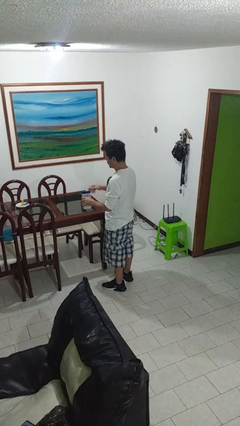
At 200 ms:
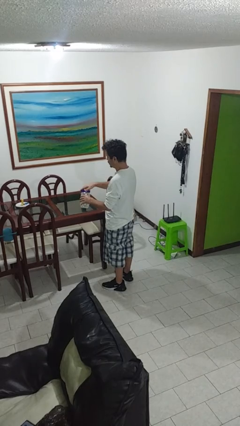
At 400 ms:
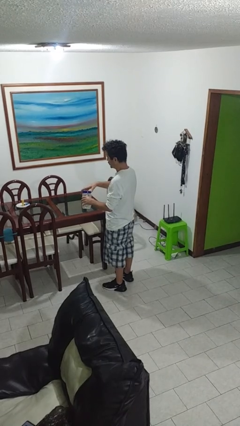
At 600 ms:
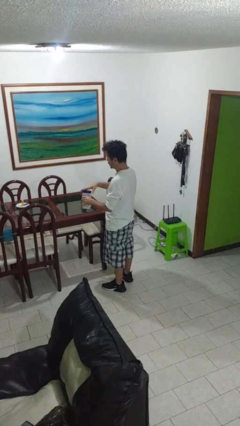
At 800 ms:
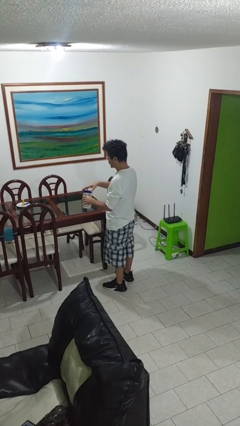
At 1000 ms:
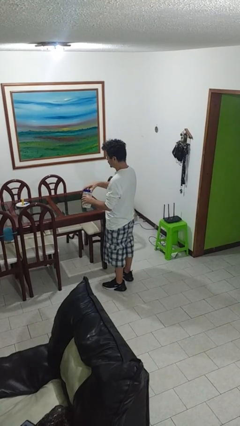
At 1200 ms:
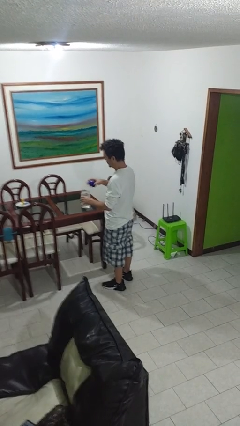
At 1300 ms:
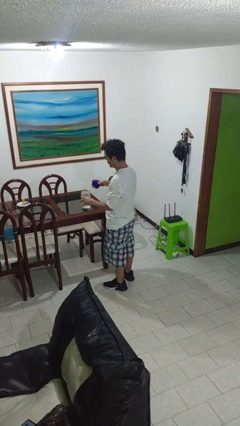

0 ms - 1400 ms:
person opens jar

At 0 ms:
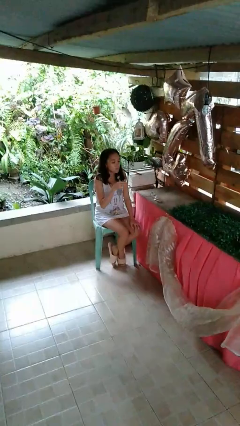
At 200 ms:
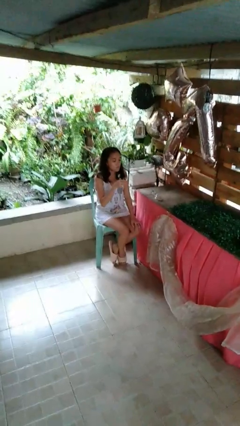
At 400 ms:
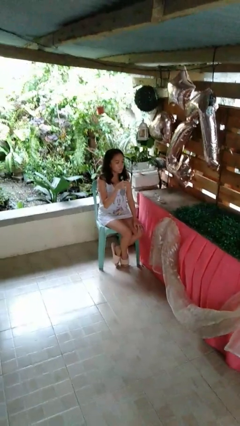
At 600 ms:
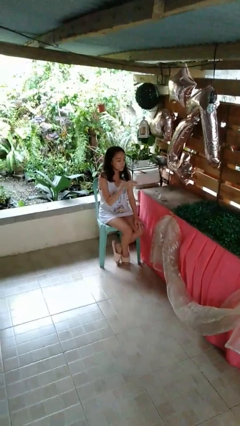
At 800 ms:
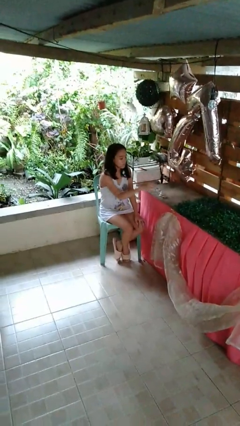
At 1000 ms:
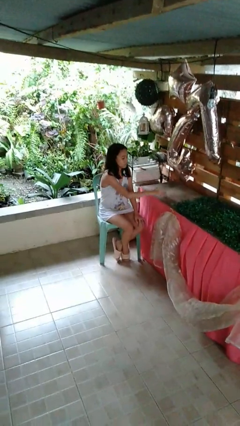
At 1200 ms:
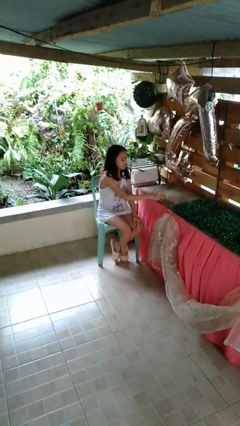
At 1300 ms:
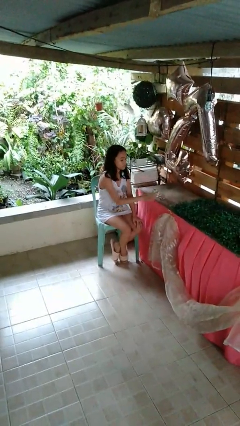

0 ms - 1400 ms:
person puts down object on table

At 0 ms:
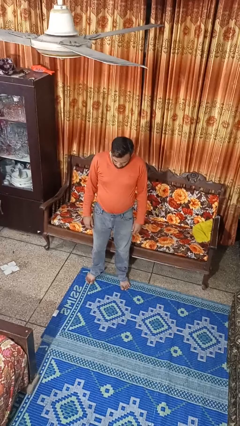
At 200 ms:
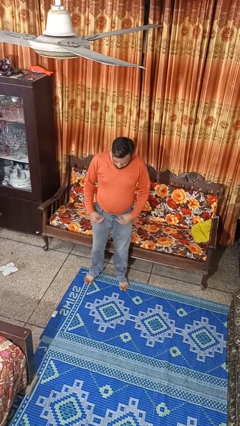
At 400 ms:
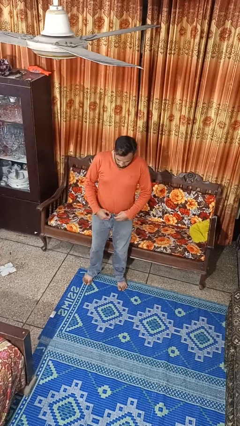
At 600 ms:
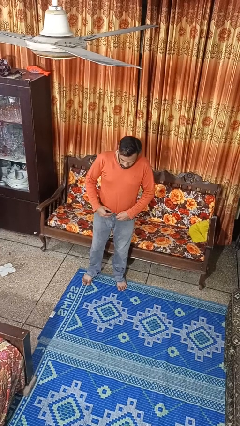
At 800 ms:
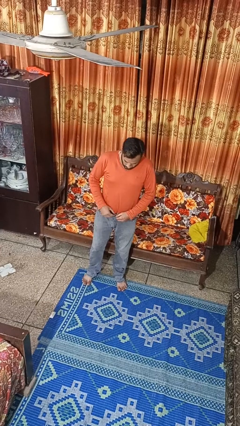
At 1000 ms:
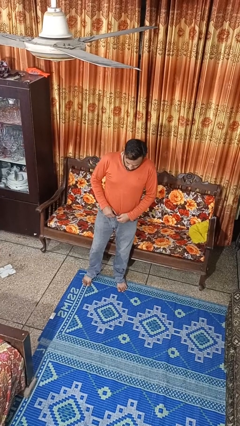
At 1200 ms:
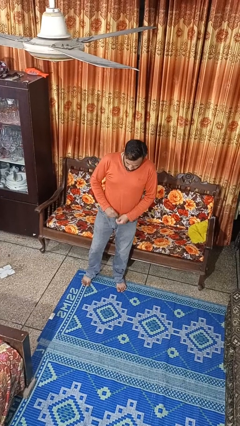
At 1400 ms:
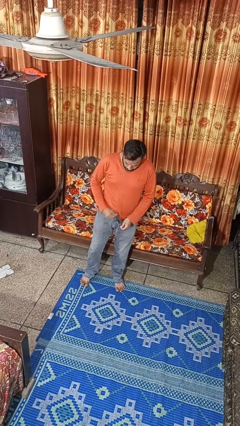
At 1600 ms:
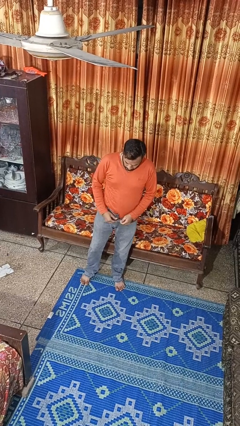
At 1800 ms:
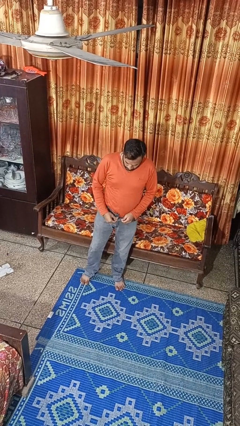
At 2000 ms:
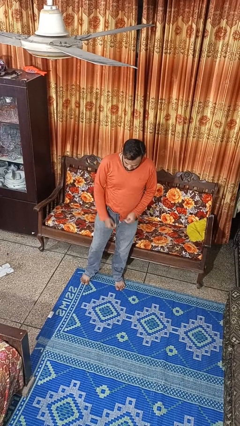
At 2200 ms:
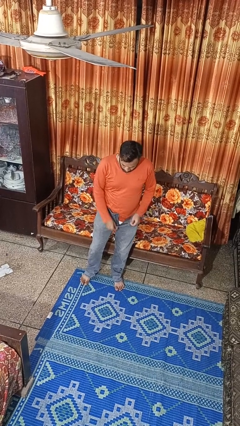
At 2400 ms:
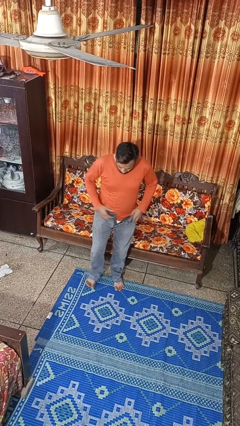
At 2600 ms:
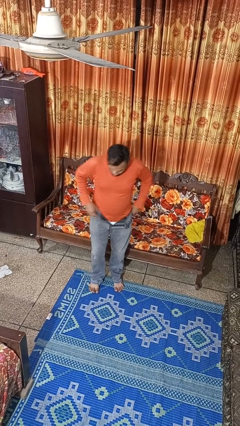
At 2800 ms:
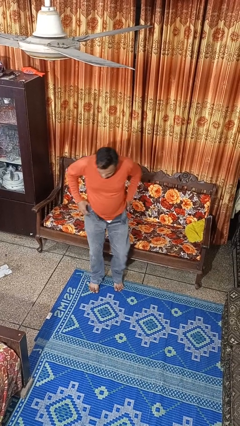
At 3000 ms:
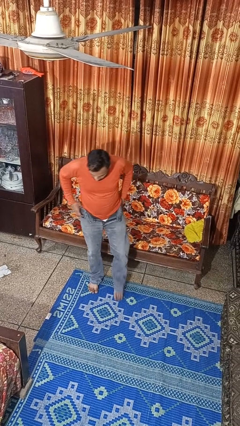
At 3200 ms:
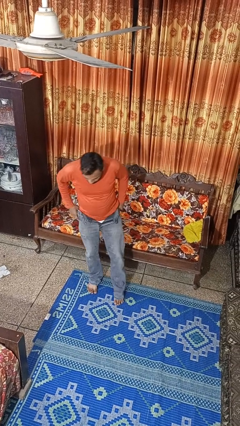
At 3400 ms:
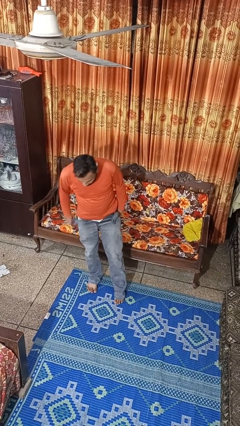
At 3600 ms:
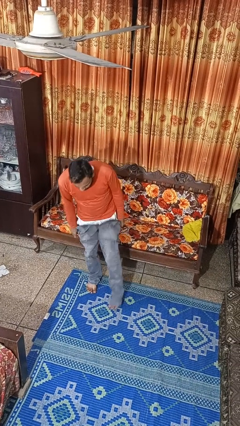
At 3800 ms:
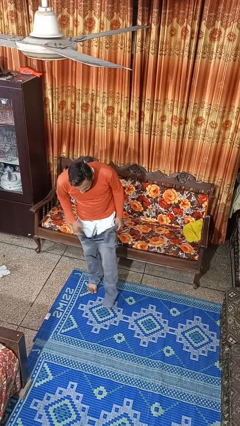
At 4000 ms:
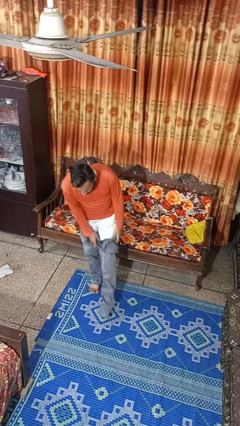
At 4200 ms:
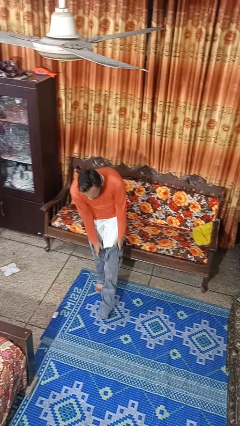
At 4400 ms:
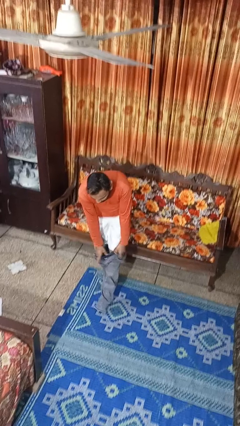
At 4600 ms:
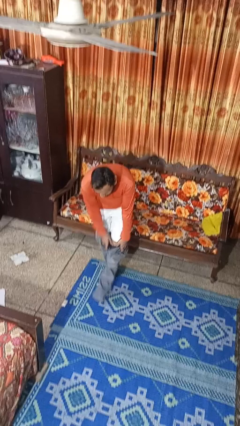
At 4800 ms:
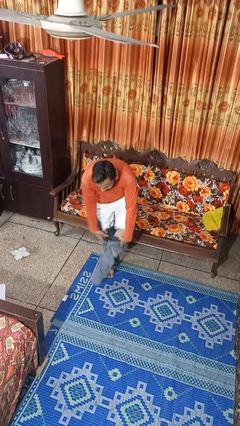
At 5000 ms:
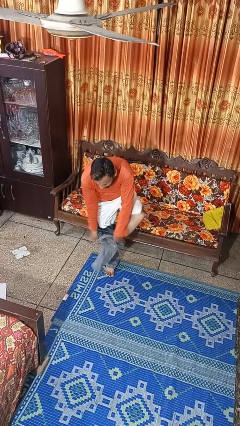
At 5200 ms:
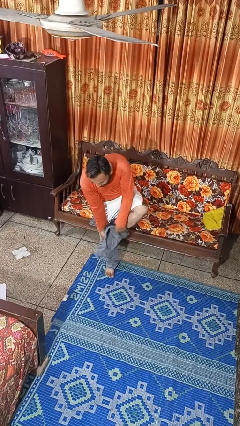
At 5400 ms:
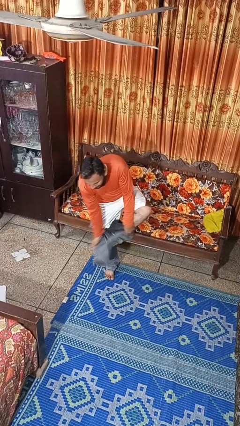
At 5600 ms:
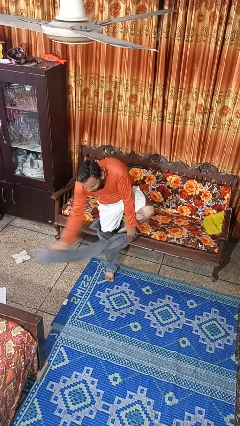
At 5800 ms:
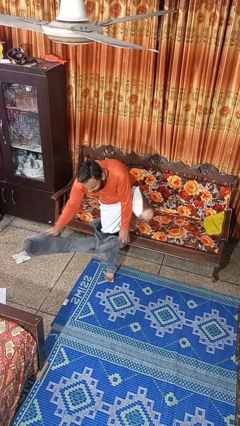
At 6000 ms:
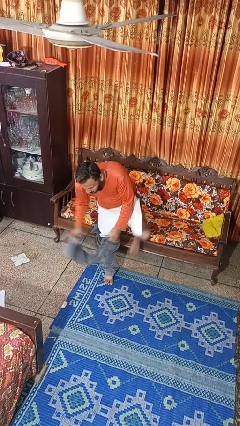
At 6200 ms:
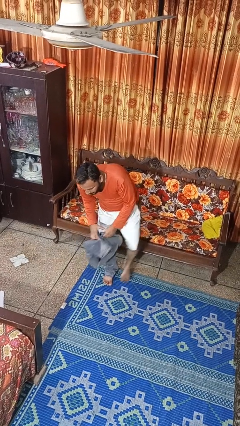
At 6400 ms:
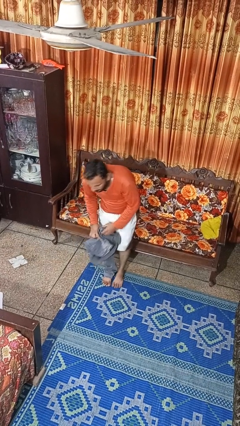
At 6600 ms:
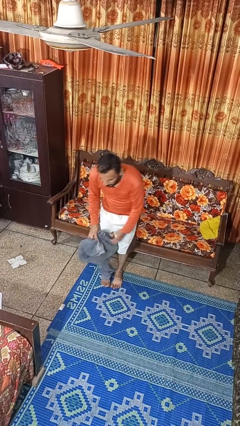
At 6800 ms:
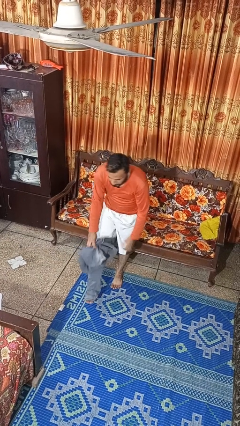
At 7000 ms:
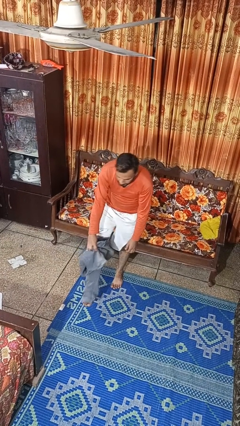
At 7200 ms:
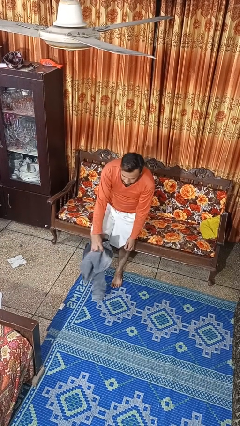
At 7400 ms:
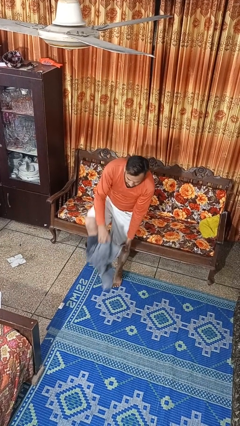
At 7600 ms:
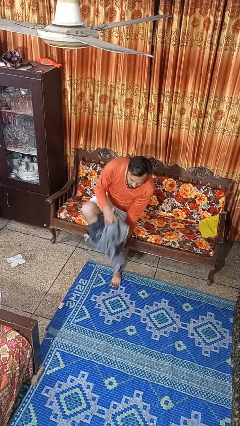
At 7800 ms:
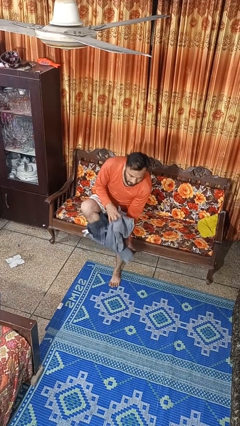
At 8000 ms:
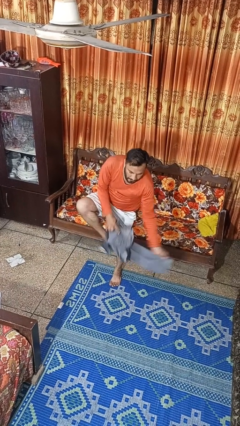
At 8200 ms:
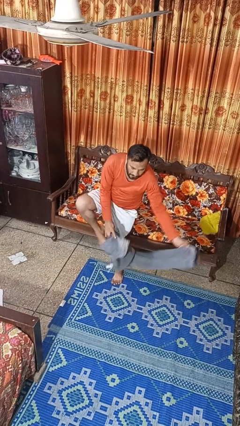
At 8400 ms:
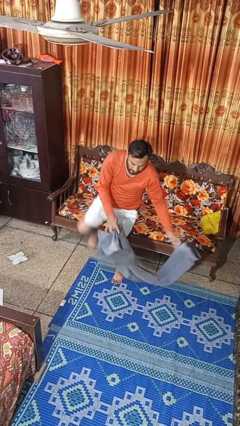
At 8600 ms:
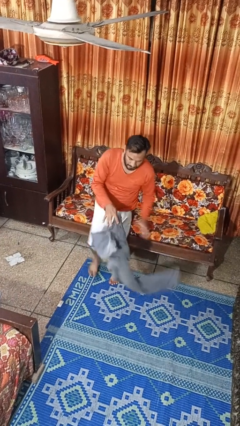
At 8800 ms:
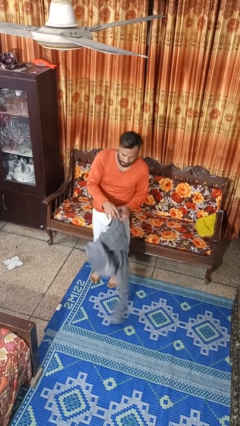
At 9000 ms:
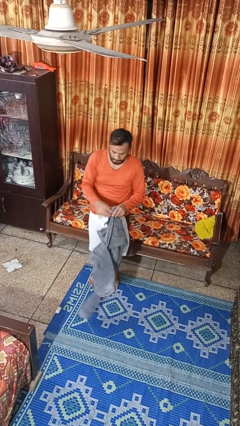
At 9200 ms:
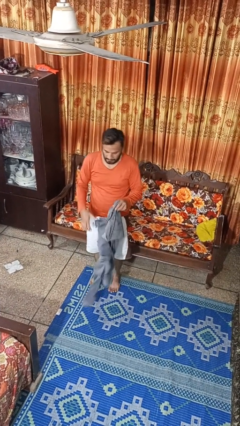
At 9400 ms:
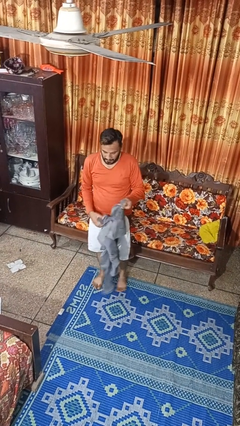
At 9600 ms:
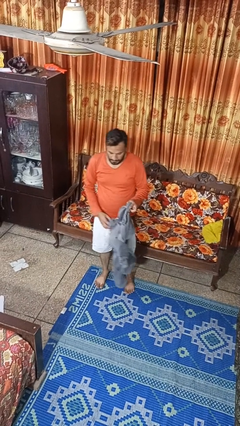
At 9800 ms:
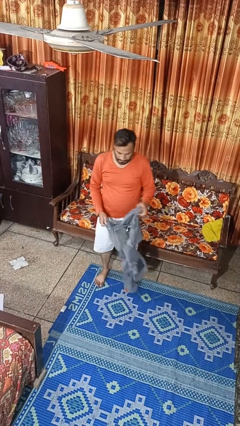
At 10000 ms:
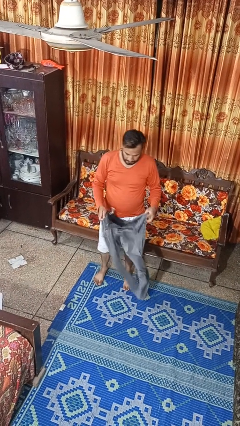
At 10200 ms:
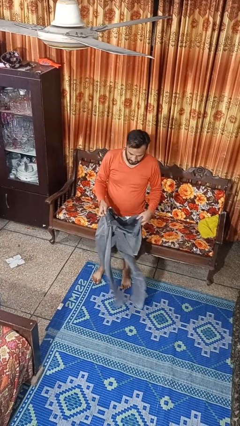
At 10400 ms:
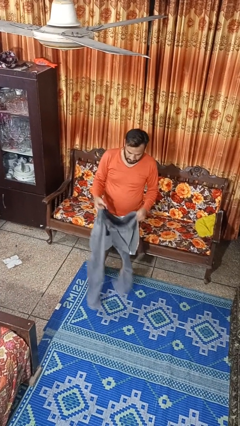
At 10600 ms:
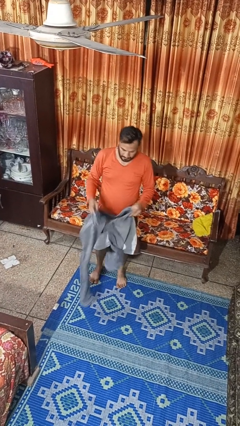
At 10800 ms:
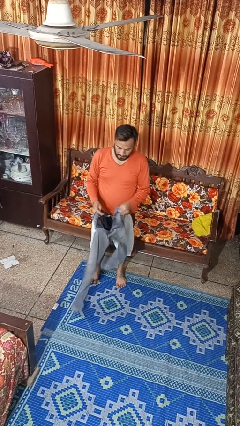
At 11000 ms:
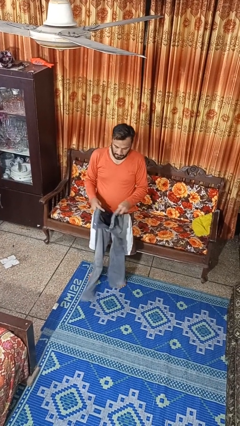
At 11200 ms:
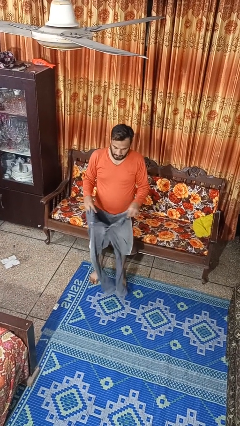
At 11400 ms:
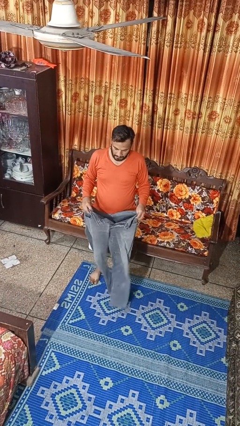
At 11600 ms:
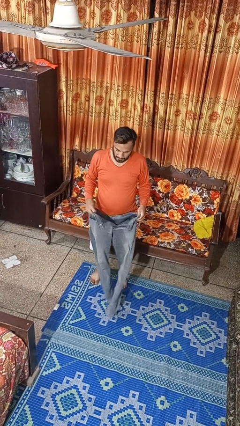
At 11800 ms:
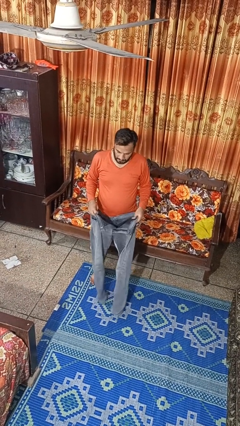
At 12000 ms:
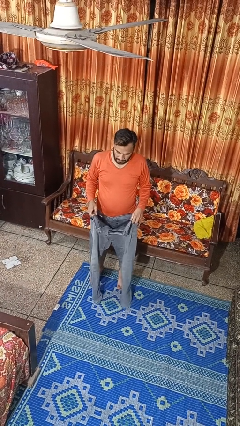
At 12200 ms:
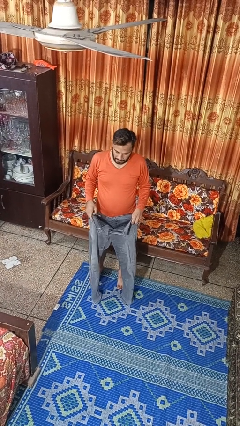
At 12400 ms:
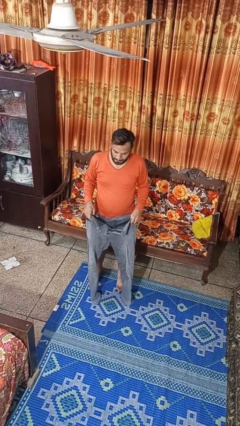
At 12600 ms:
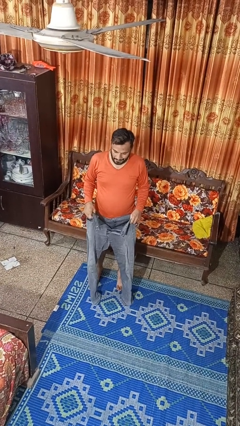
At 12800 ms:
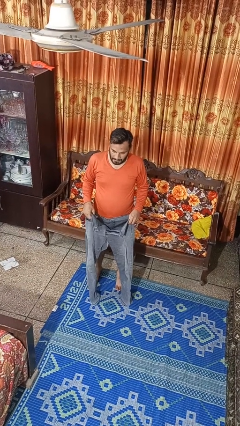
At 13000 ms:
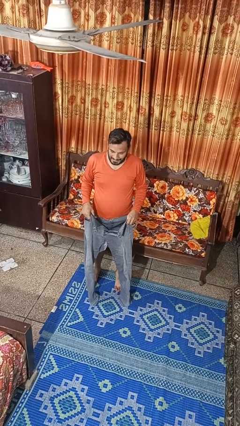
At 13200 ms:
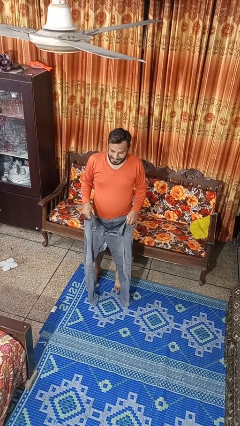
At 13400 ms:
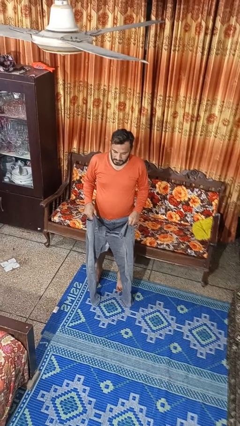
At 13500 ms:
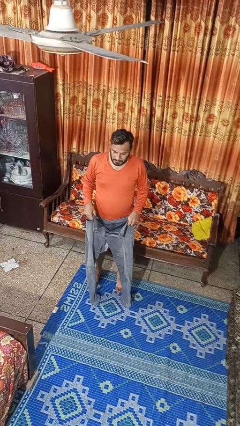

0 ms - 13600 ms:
person takes off pants

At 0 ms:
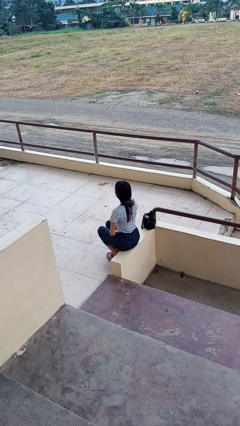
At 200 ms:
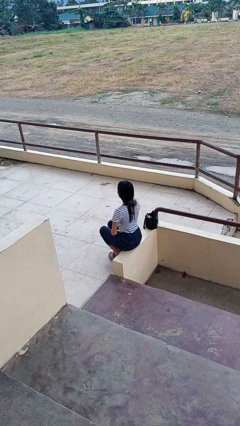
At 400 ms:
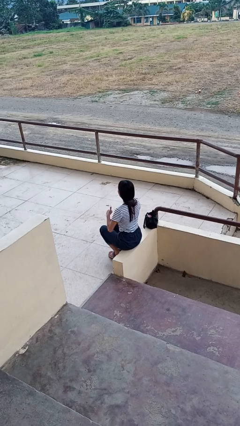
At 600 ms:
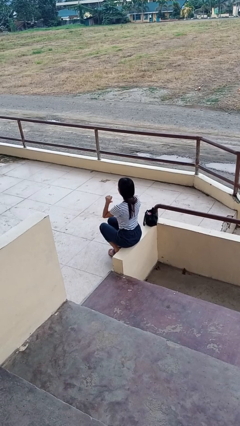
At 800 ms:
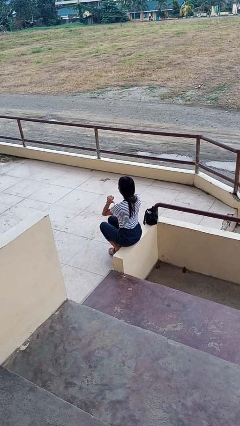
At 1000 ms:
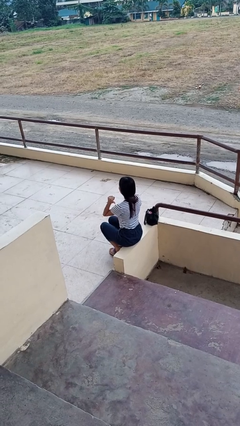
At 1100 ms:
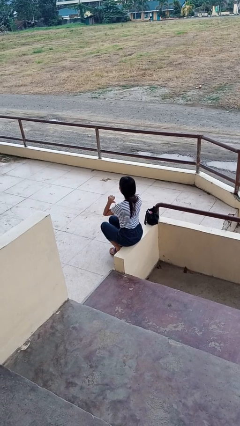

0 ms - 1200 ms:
person gestures behind me
